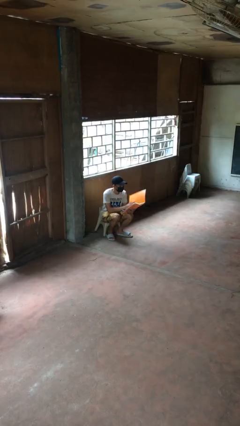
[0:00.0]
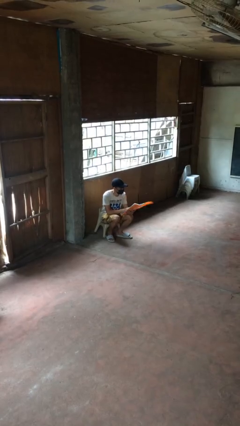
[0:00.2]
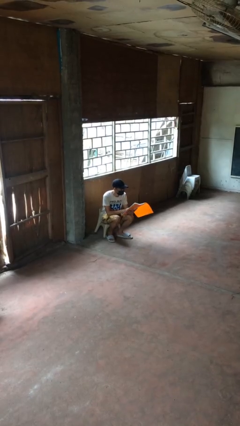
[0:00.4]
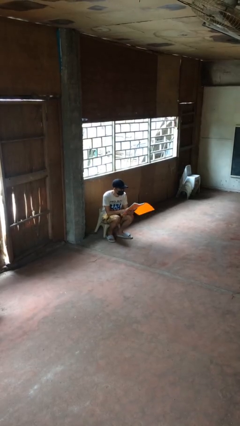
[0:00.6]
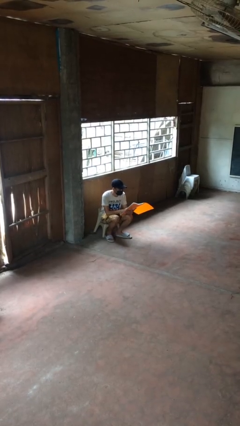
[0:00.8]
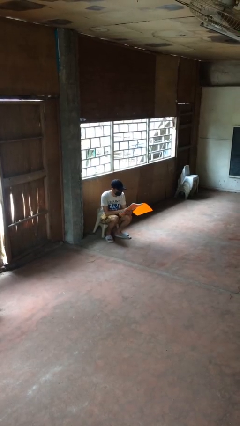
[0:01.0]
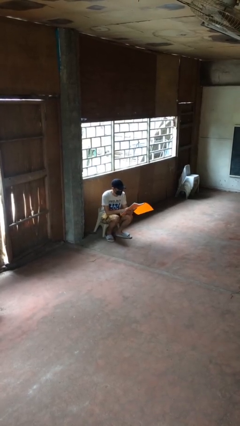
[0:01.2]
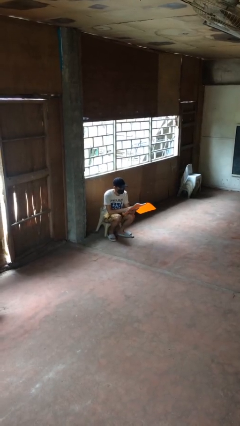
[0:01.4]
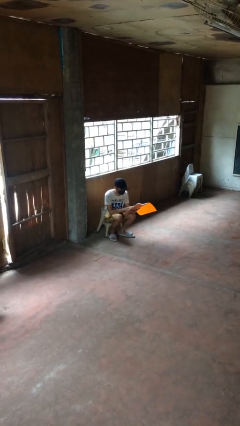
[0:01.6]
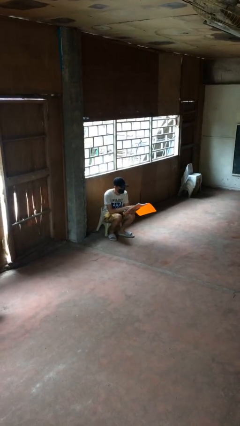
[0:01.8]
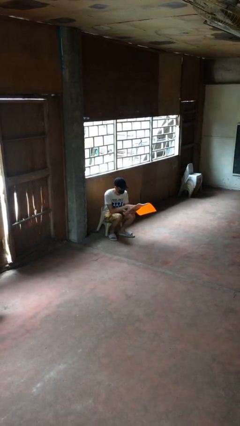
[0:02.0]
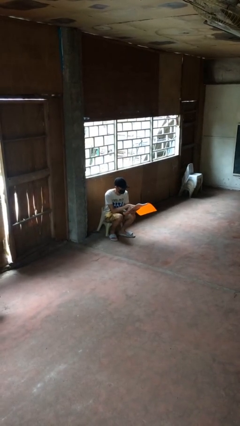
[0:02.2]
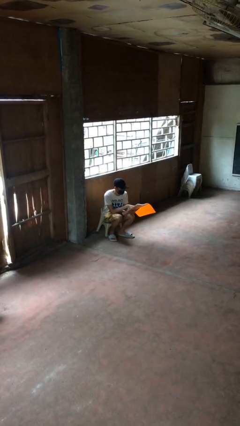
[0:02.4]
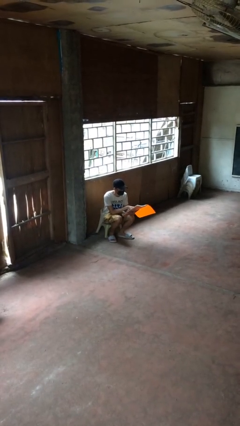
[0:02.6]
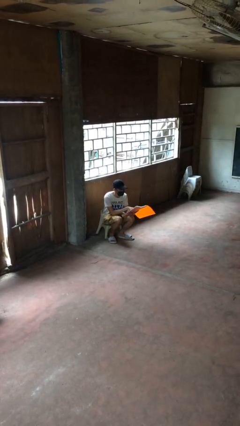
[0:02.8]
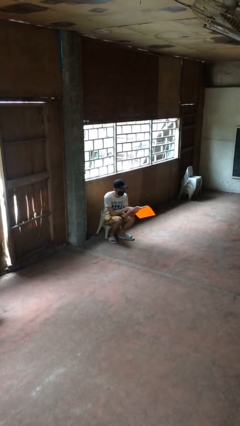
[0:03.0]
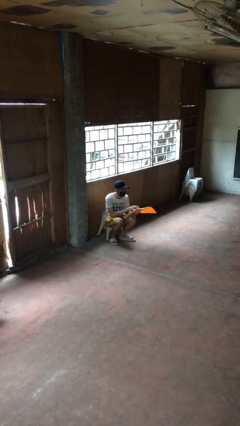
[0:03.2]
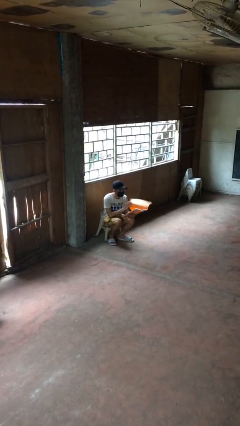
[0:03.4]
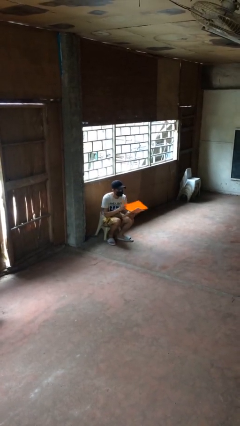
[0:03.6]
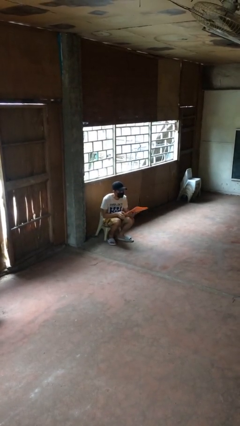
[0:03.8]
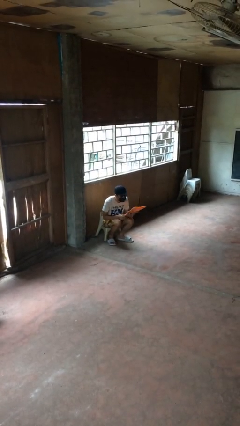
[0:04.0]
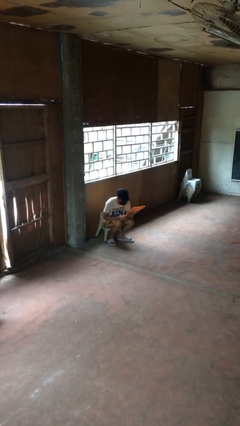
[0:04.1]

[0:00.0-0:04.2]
person reads document

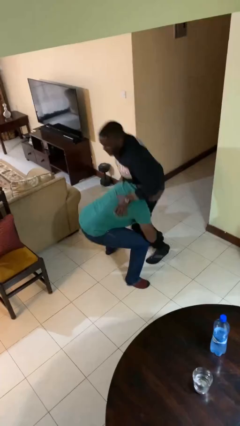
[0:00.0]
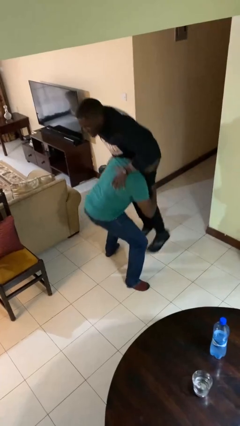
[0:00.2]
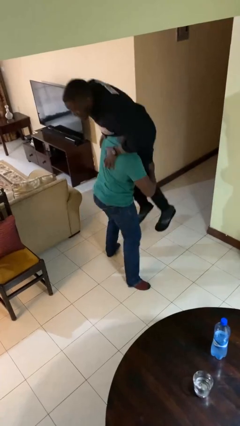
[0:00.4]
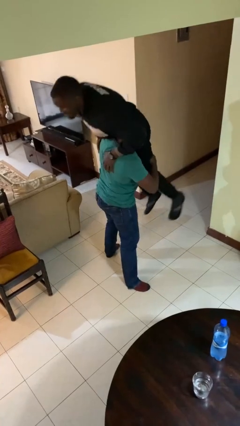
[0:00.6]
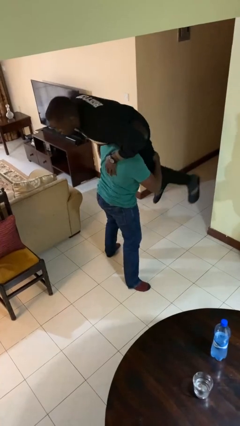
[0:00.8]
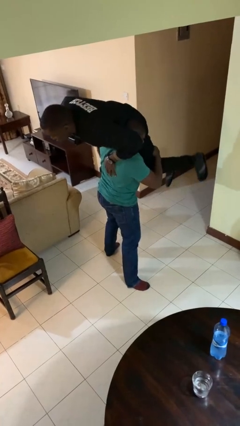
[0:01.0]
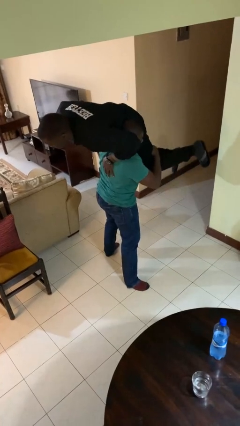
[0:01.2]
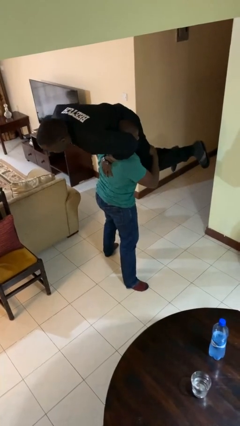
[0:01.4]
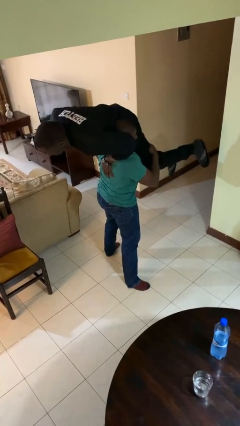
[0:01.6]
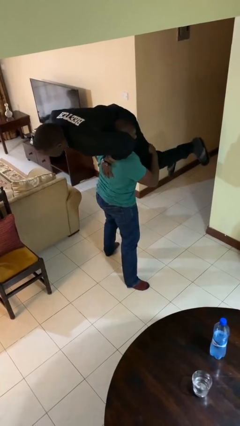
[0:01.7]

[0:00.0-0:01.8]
person carries person over shoulder

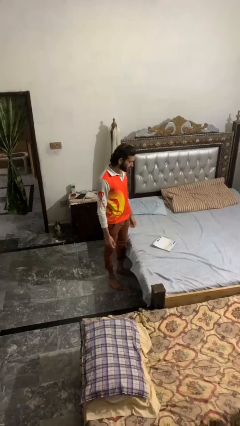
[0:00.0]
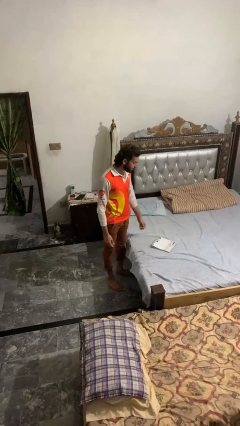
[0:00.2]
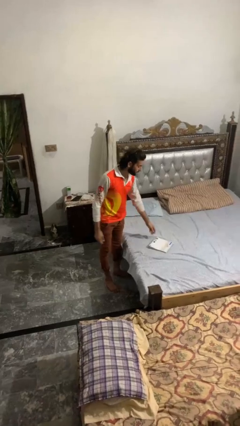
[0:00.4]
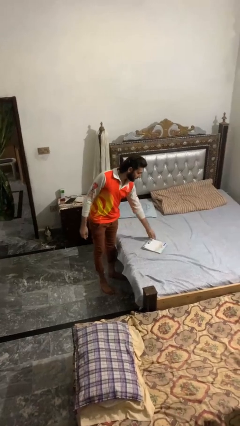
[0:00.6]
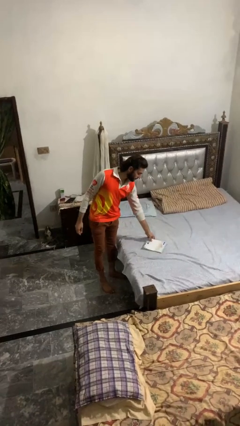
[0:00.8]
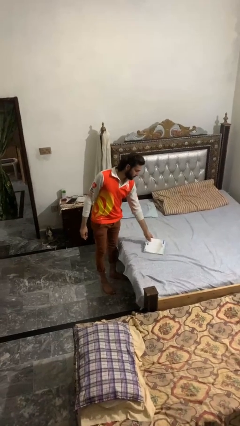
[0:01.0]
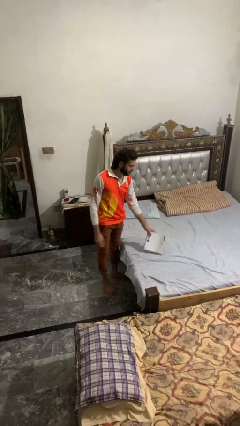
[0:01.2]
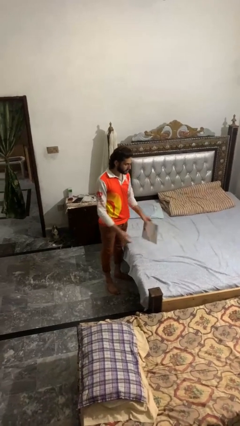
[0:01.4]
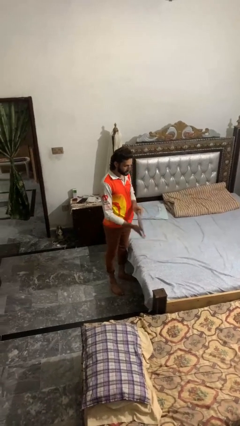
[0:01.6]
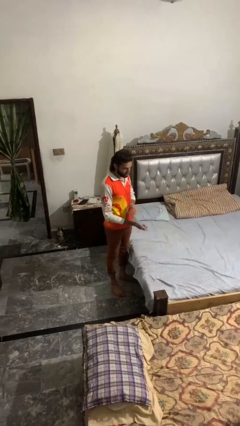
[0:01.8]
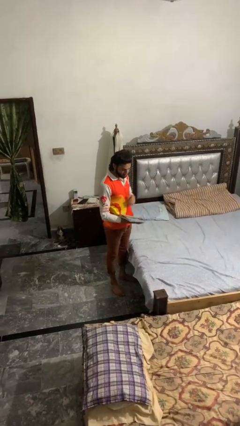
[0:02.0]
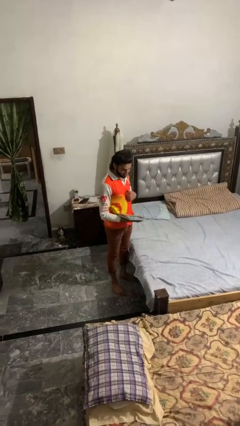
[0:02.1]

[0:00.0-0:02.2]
person picks up object from bed

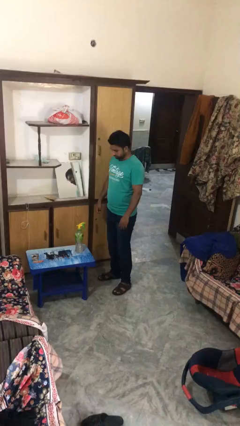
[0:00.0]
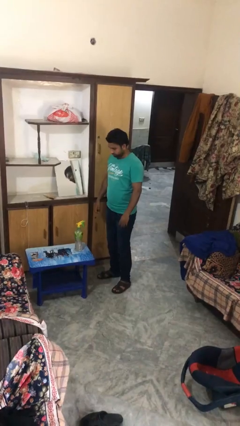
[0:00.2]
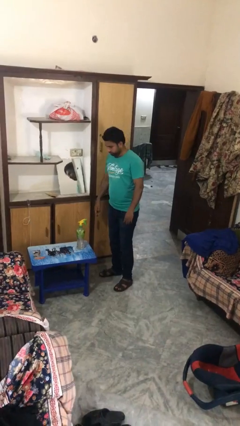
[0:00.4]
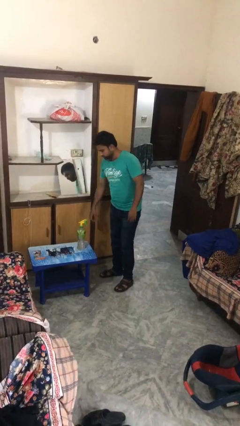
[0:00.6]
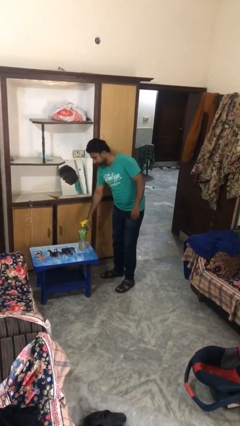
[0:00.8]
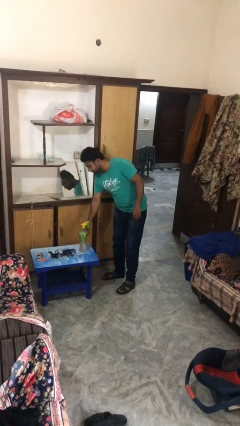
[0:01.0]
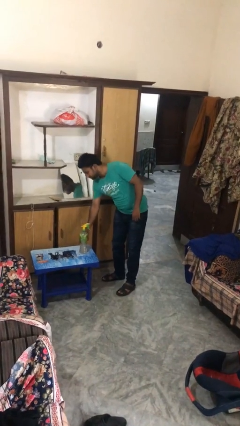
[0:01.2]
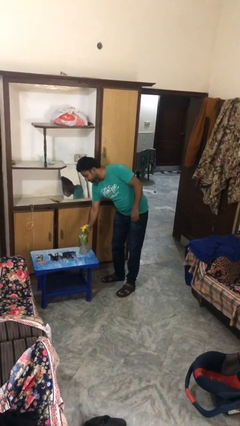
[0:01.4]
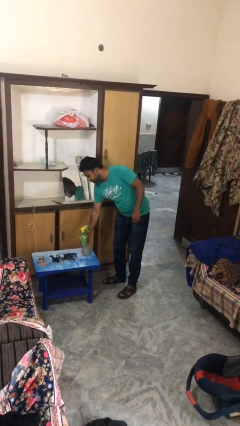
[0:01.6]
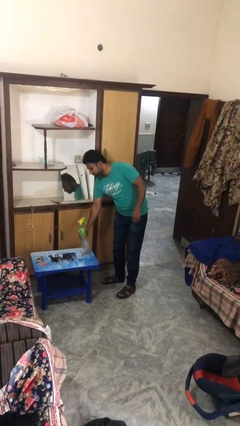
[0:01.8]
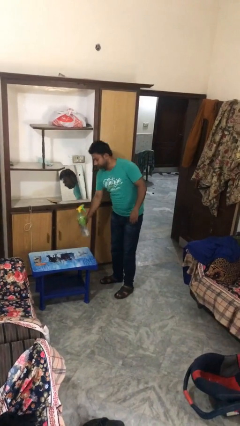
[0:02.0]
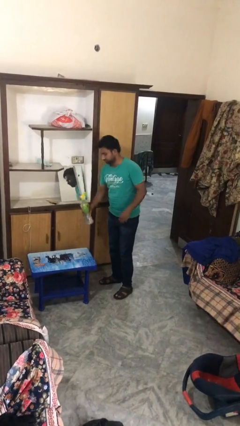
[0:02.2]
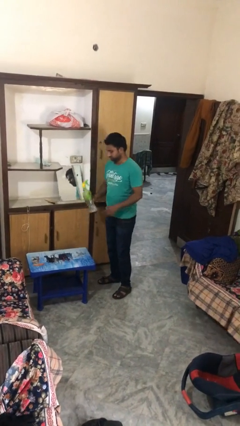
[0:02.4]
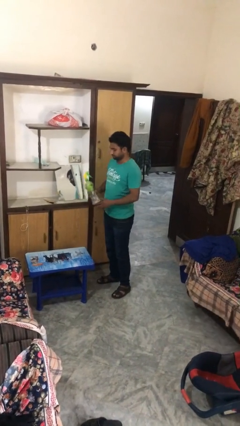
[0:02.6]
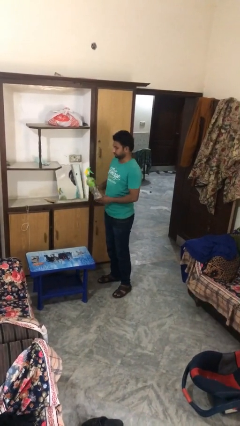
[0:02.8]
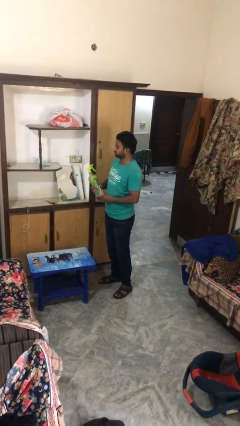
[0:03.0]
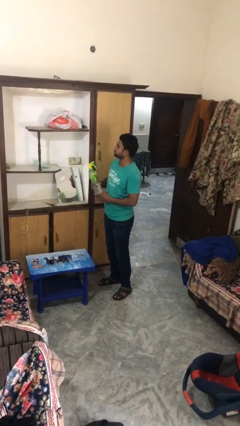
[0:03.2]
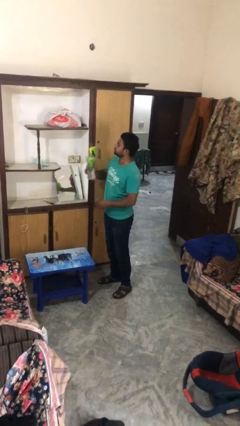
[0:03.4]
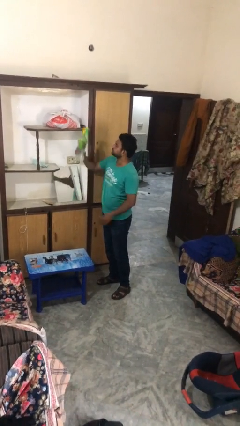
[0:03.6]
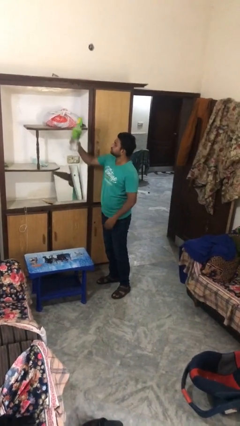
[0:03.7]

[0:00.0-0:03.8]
person picks up object from table

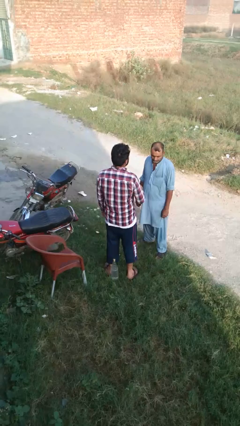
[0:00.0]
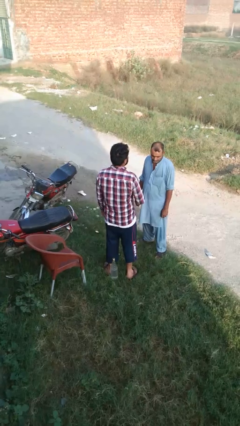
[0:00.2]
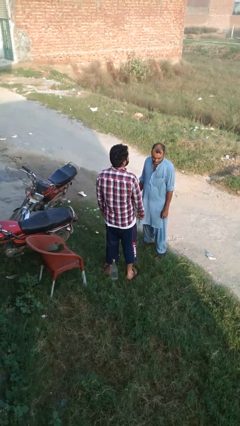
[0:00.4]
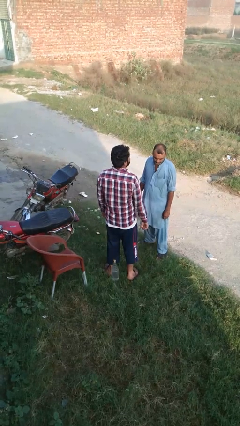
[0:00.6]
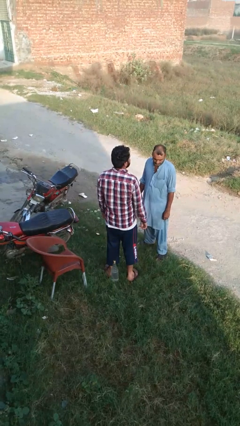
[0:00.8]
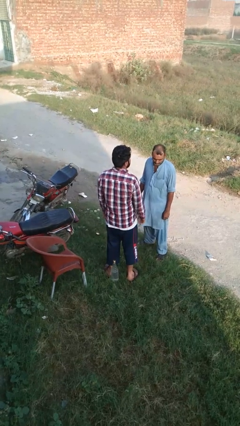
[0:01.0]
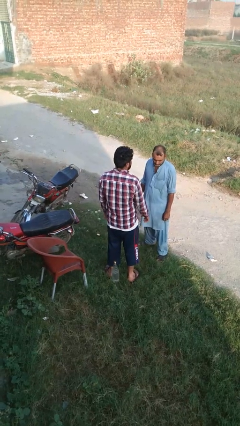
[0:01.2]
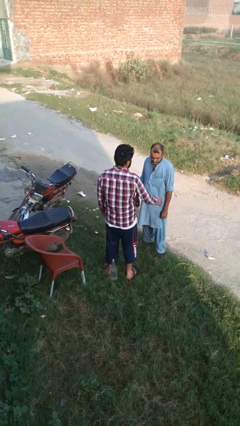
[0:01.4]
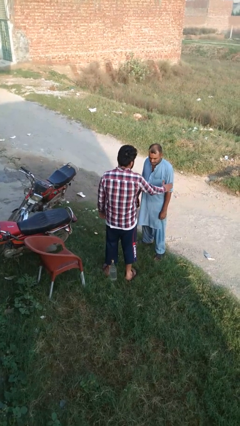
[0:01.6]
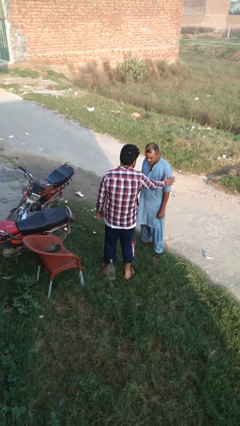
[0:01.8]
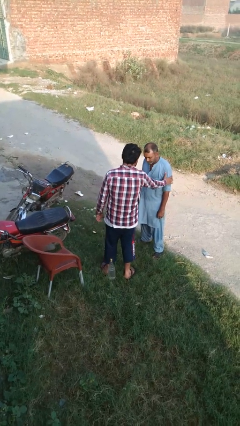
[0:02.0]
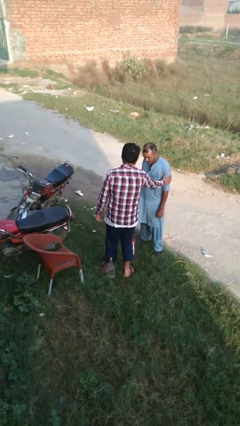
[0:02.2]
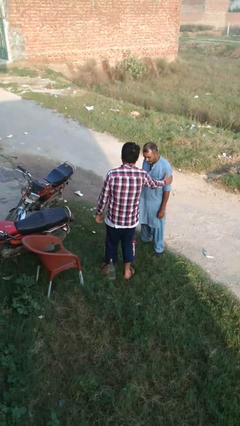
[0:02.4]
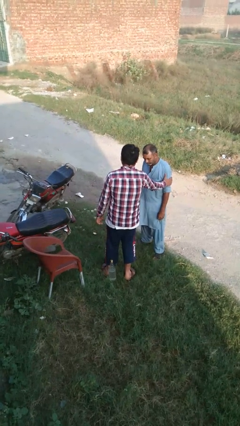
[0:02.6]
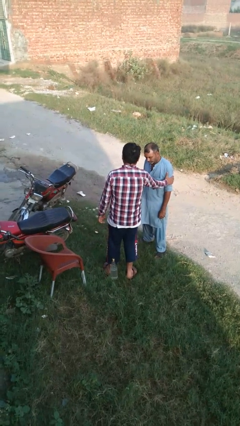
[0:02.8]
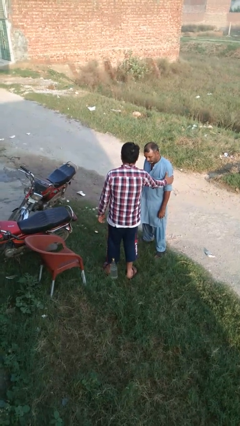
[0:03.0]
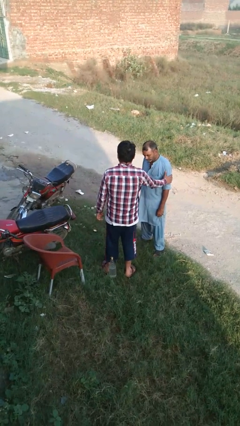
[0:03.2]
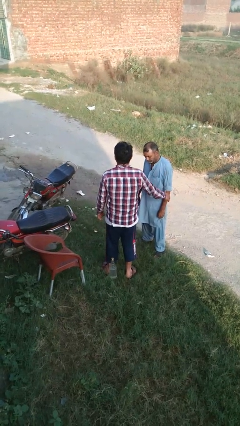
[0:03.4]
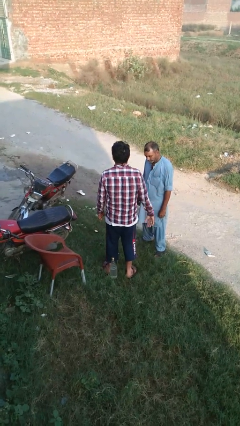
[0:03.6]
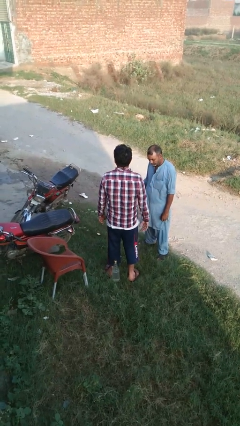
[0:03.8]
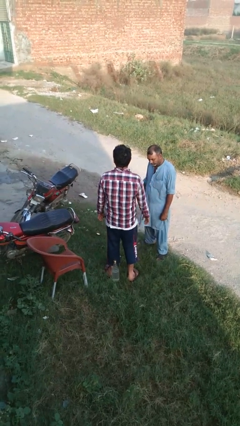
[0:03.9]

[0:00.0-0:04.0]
person grabs person by bicep

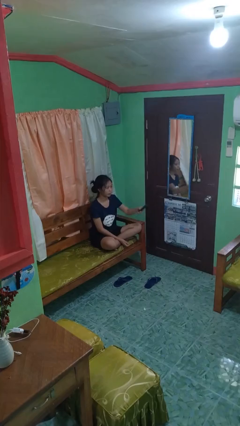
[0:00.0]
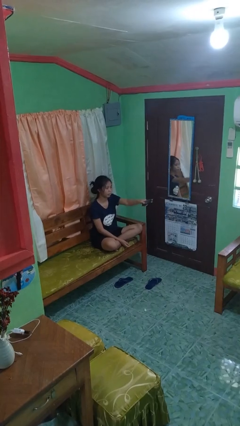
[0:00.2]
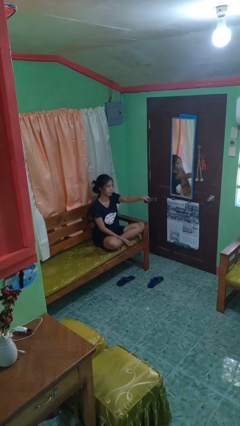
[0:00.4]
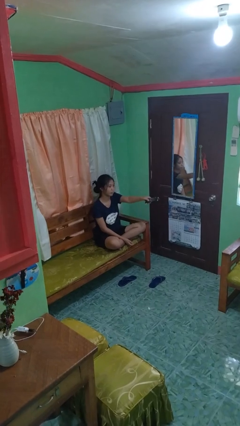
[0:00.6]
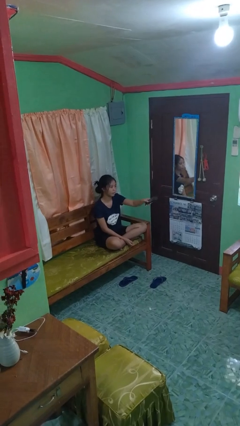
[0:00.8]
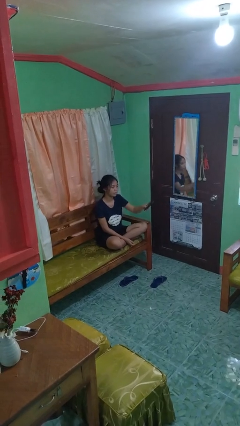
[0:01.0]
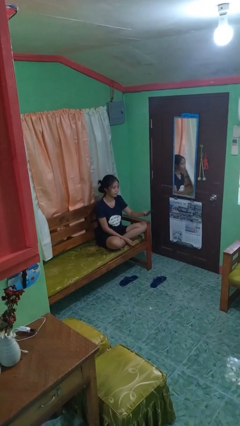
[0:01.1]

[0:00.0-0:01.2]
person uses television remote
